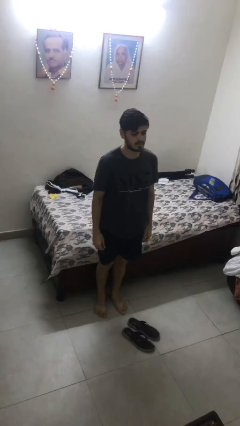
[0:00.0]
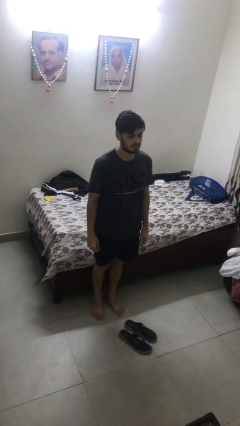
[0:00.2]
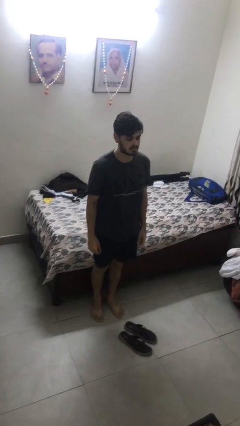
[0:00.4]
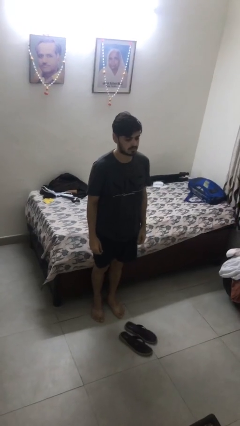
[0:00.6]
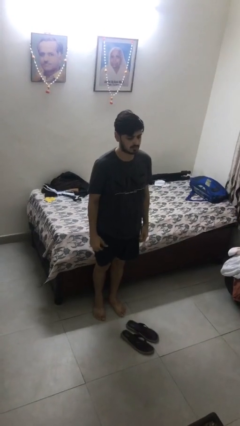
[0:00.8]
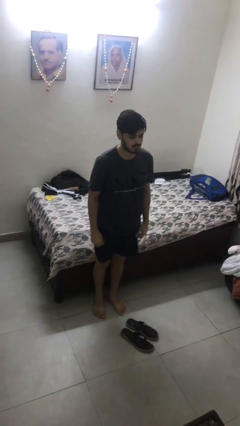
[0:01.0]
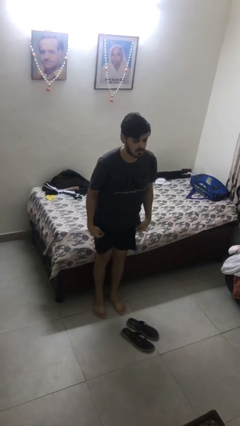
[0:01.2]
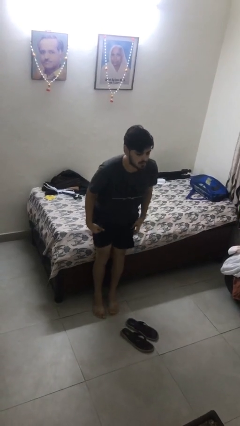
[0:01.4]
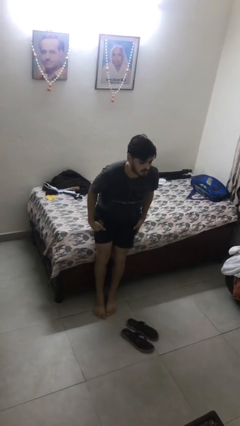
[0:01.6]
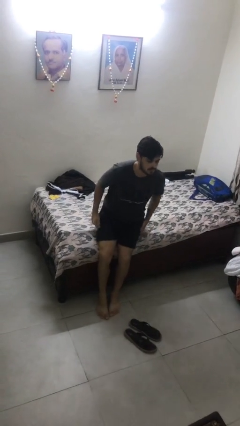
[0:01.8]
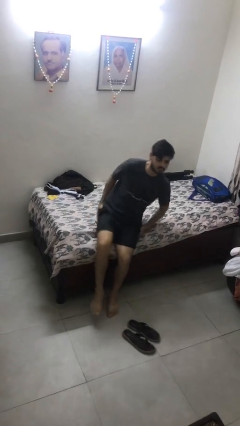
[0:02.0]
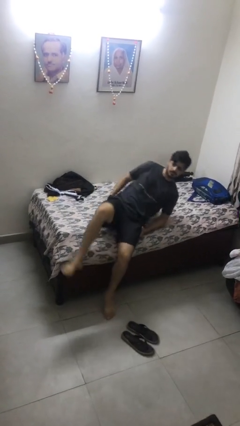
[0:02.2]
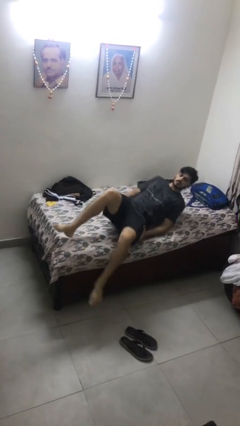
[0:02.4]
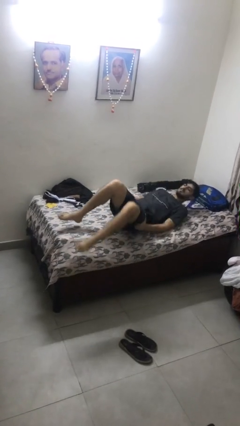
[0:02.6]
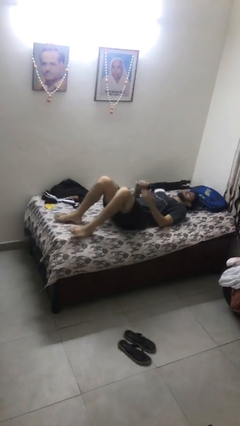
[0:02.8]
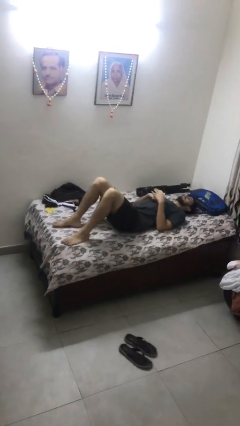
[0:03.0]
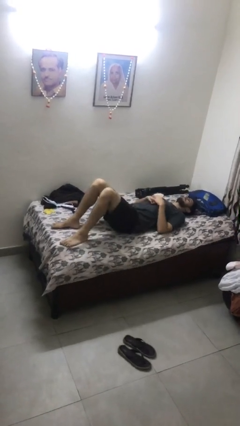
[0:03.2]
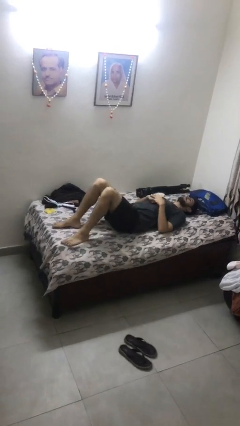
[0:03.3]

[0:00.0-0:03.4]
person lies down on bed

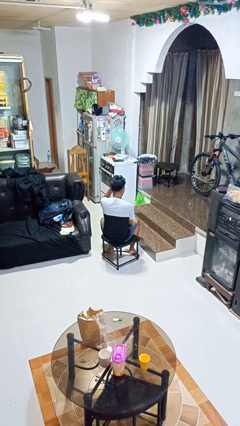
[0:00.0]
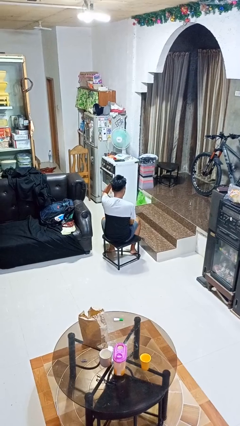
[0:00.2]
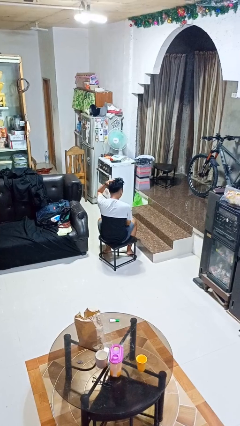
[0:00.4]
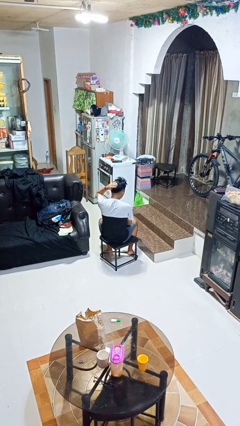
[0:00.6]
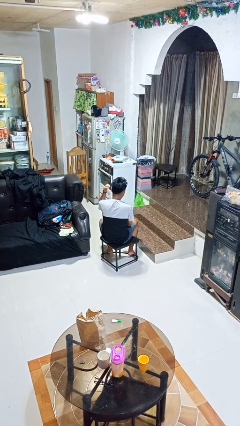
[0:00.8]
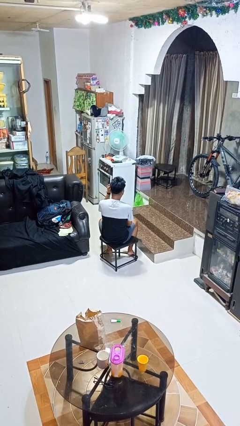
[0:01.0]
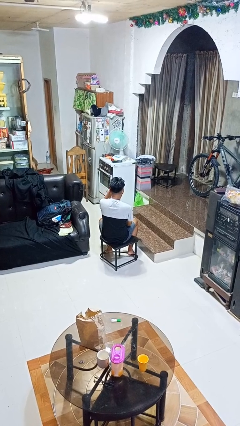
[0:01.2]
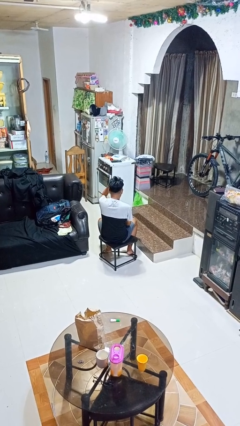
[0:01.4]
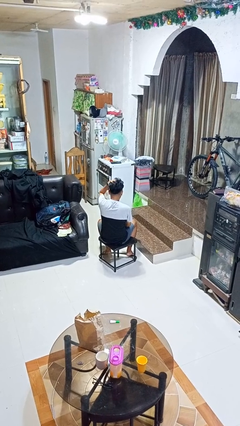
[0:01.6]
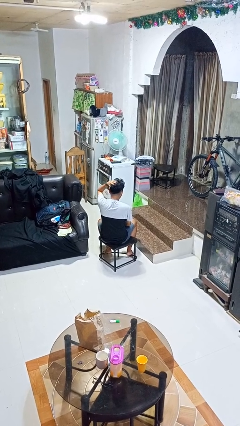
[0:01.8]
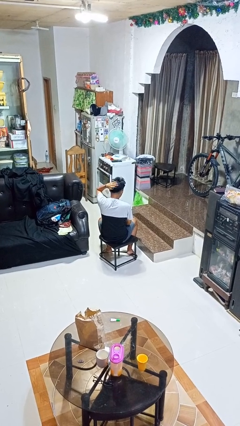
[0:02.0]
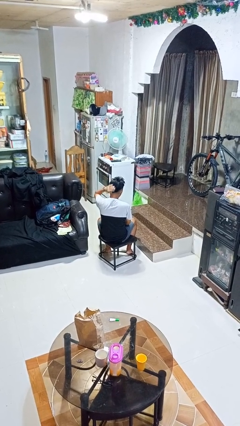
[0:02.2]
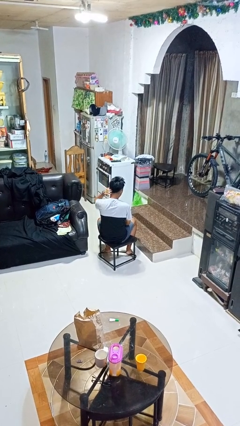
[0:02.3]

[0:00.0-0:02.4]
person strokes hair

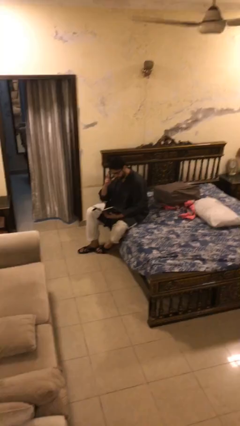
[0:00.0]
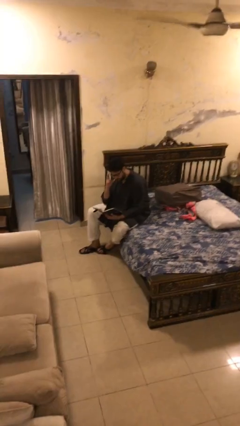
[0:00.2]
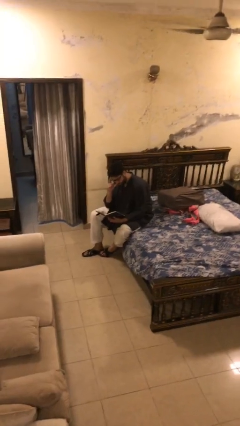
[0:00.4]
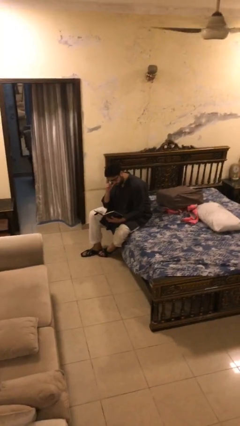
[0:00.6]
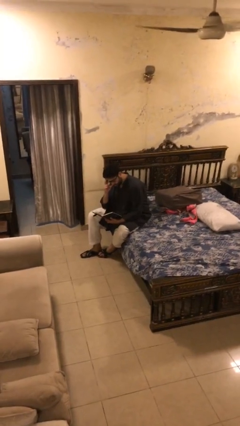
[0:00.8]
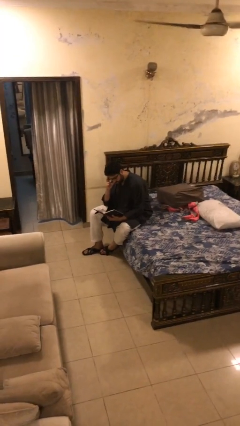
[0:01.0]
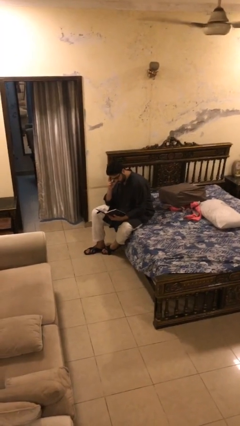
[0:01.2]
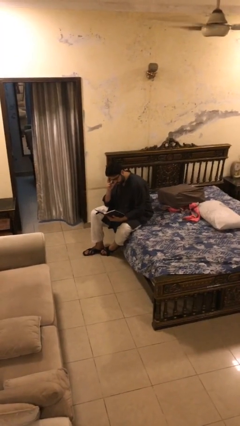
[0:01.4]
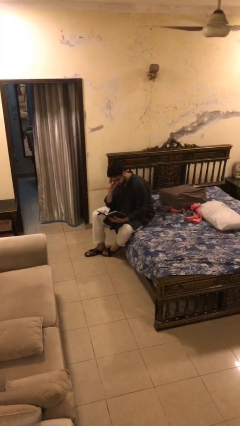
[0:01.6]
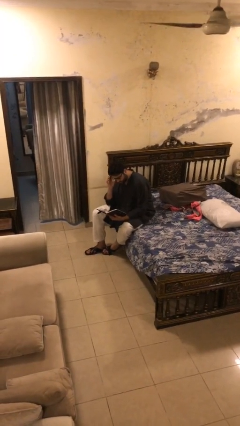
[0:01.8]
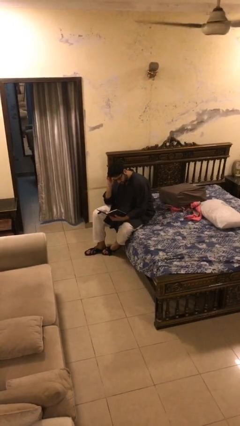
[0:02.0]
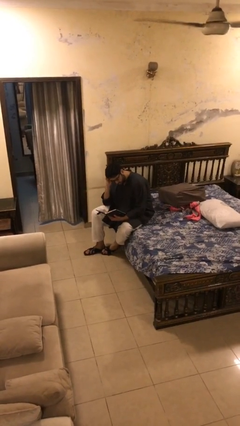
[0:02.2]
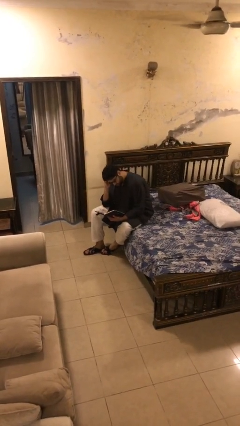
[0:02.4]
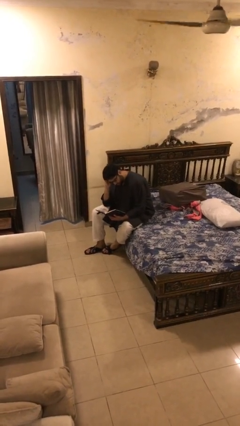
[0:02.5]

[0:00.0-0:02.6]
person reads document

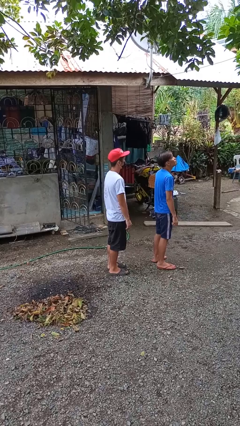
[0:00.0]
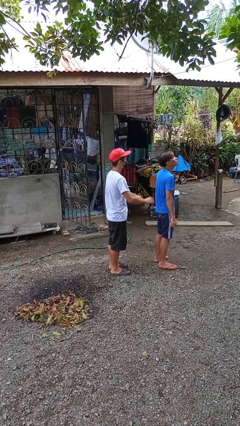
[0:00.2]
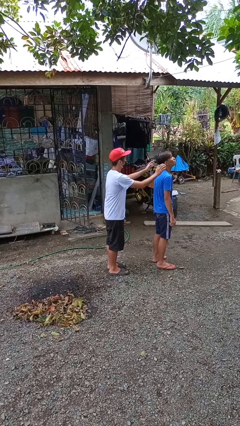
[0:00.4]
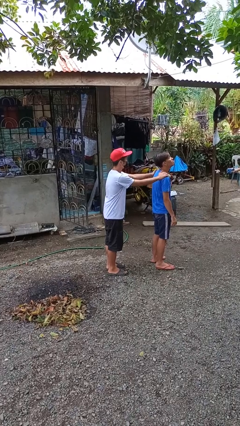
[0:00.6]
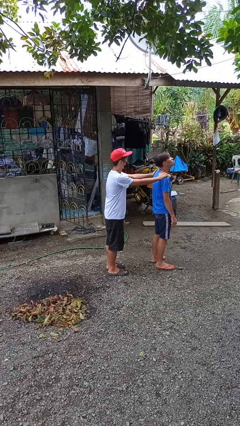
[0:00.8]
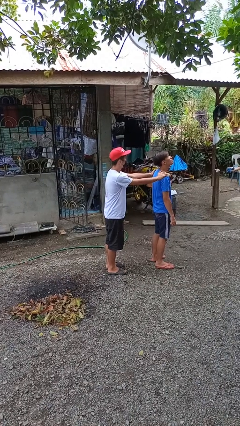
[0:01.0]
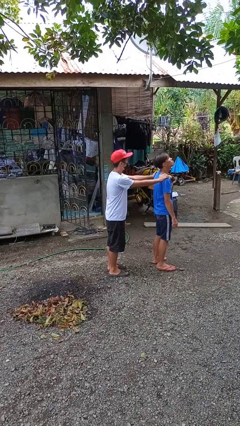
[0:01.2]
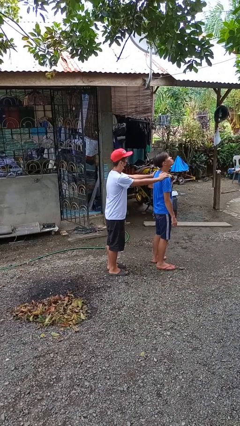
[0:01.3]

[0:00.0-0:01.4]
person grabs person by shoulder

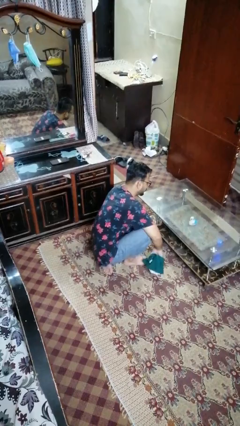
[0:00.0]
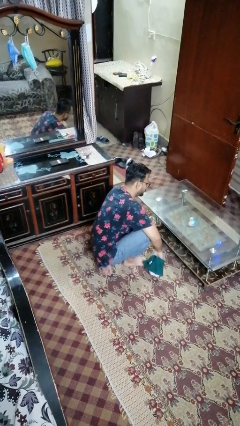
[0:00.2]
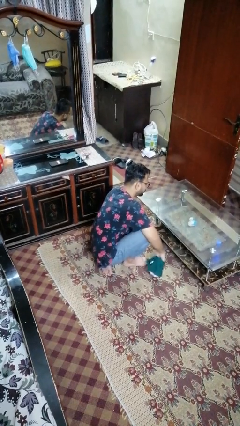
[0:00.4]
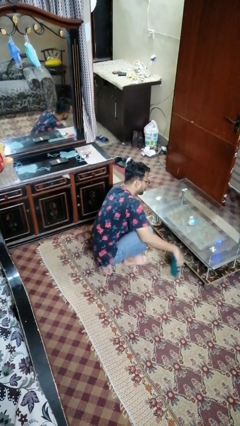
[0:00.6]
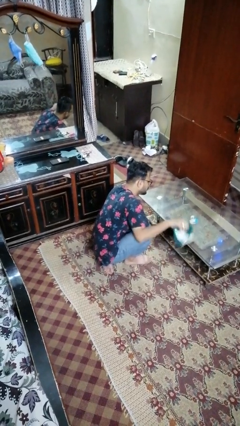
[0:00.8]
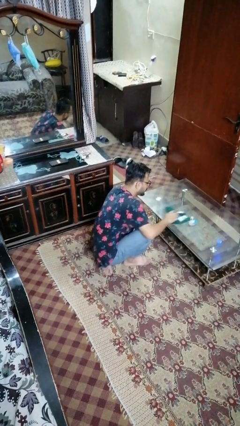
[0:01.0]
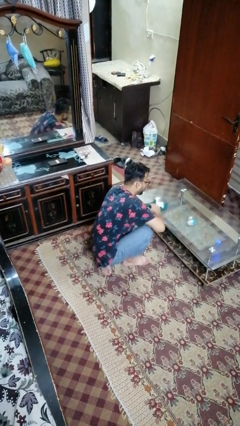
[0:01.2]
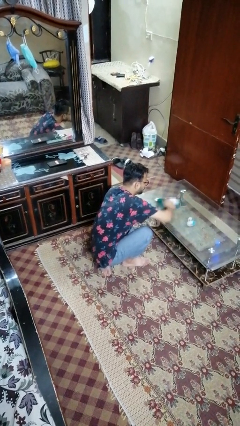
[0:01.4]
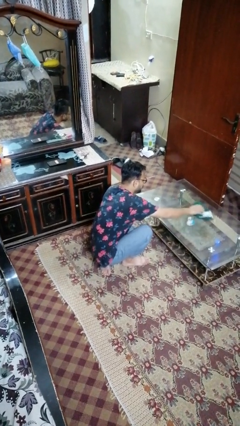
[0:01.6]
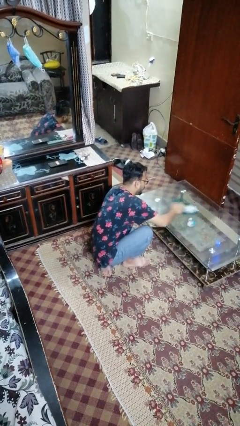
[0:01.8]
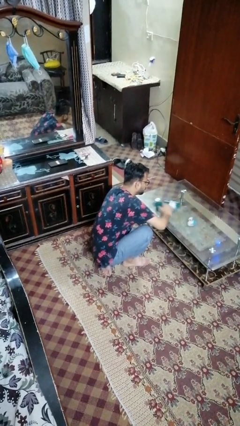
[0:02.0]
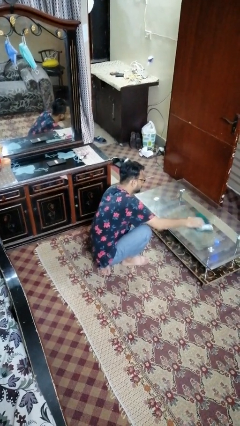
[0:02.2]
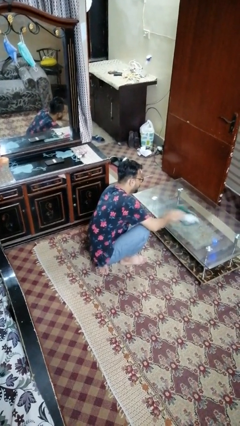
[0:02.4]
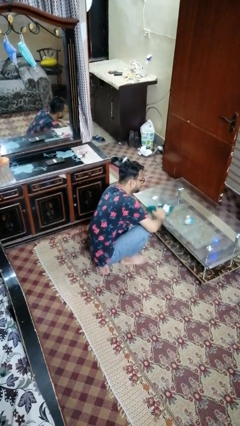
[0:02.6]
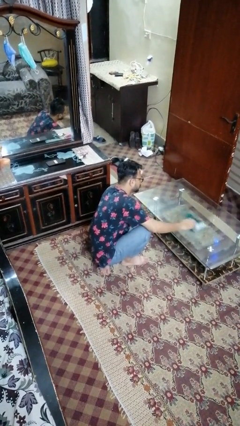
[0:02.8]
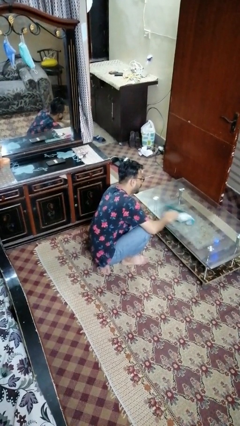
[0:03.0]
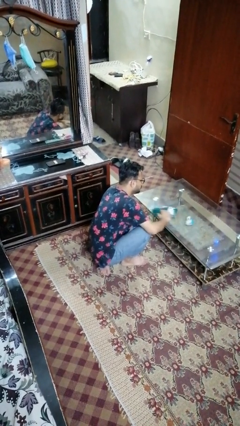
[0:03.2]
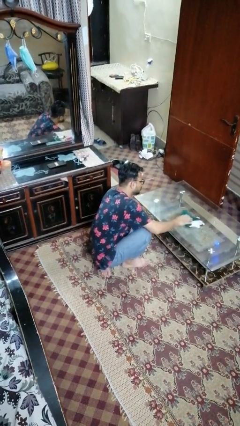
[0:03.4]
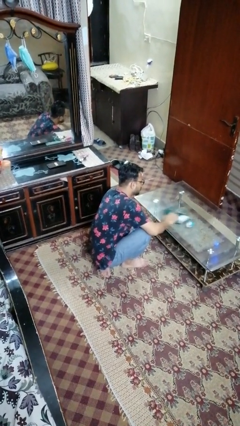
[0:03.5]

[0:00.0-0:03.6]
person cleans table with rag

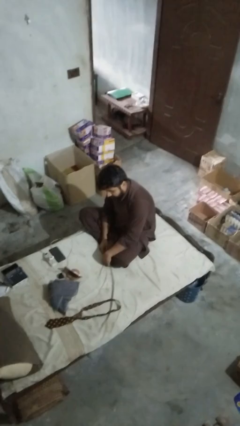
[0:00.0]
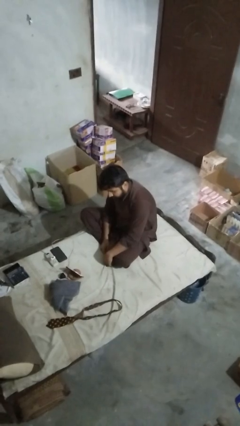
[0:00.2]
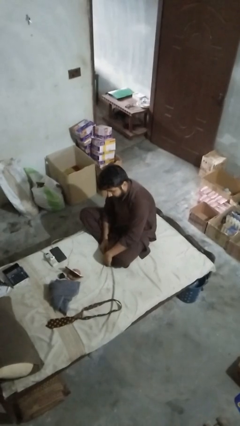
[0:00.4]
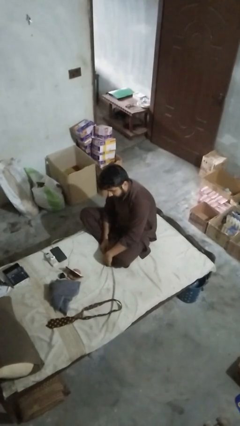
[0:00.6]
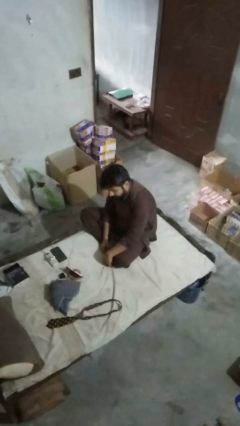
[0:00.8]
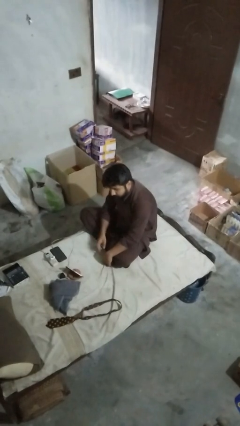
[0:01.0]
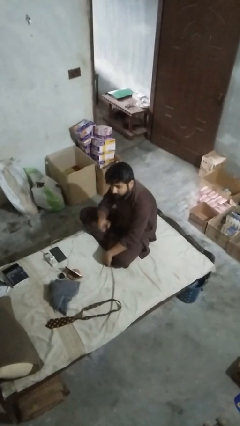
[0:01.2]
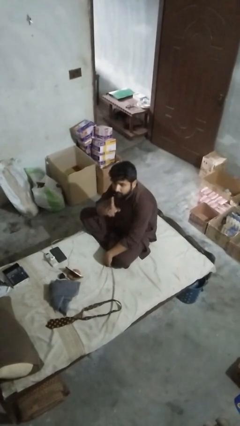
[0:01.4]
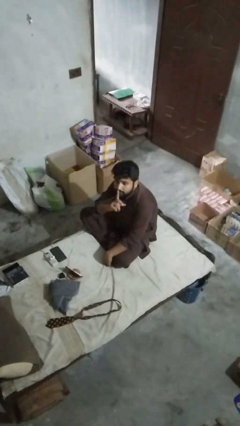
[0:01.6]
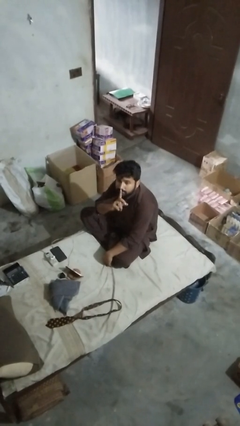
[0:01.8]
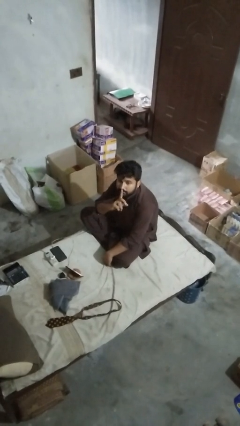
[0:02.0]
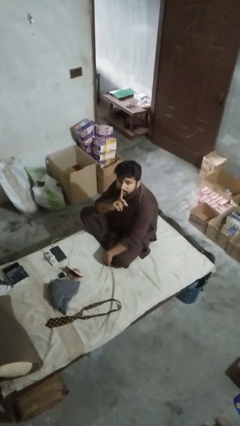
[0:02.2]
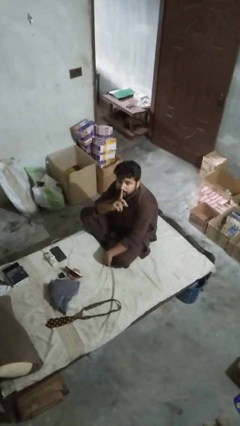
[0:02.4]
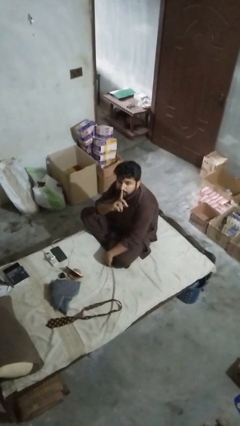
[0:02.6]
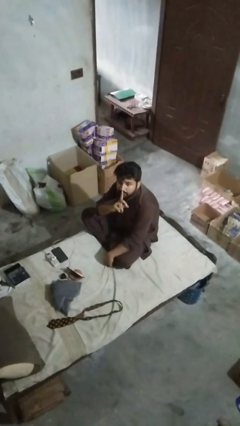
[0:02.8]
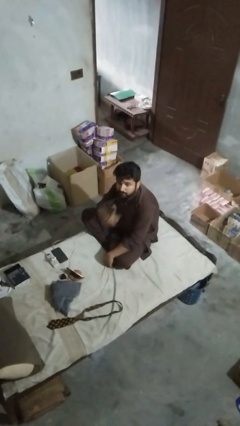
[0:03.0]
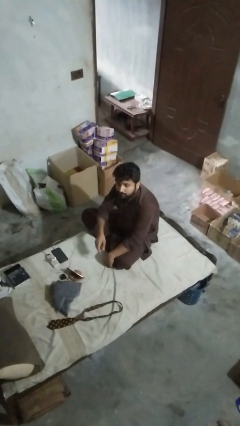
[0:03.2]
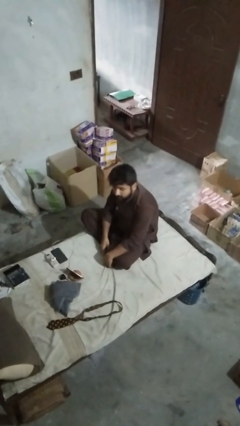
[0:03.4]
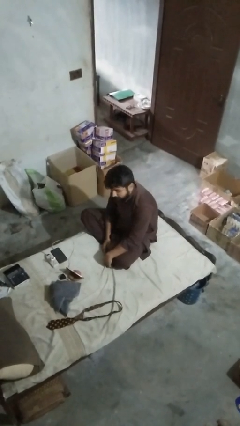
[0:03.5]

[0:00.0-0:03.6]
person gestures be quiet

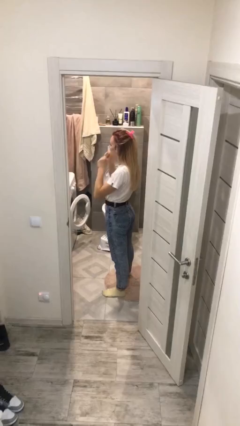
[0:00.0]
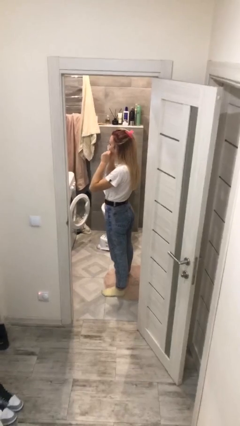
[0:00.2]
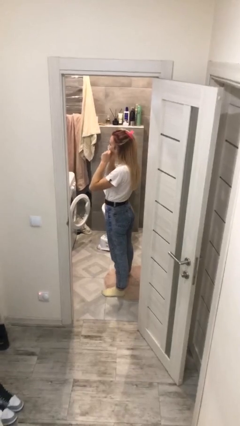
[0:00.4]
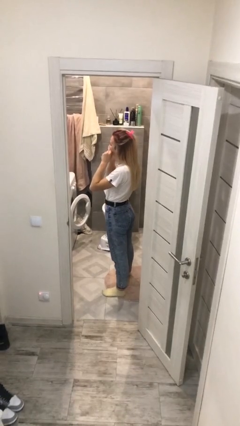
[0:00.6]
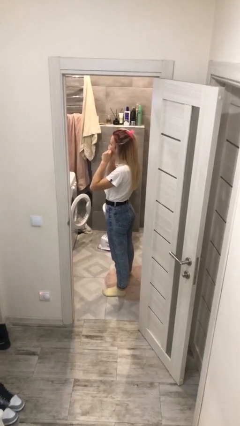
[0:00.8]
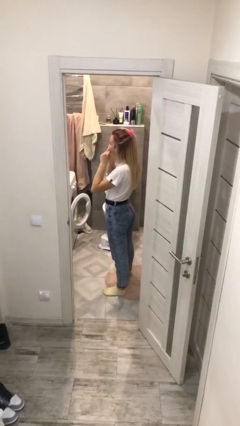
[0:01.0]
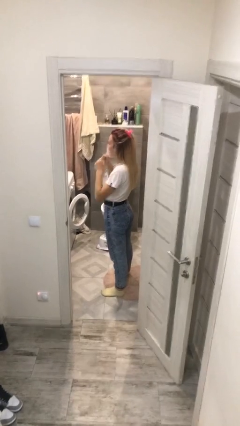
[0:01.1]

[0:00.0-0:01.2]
person flosses
